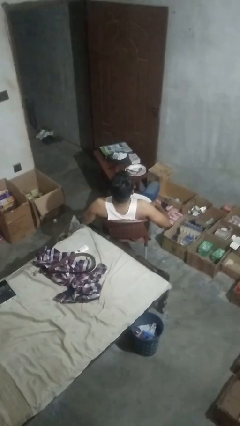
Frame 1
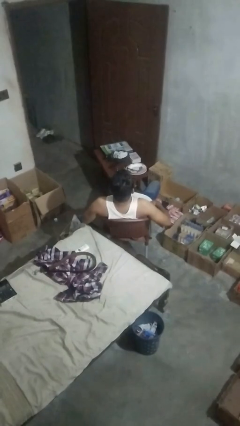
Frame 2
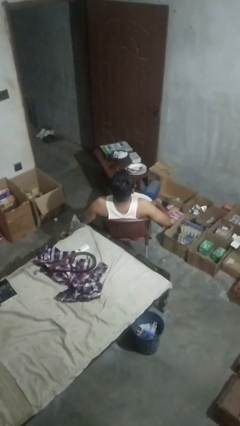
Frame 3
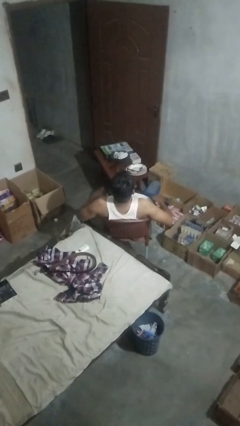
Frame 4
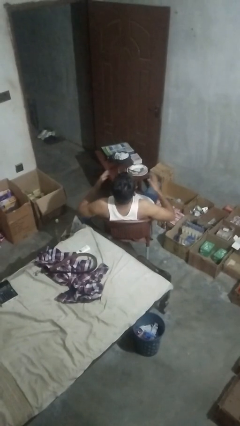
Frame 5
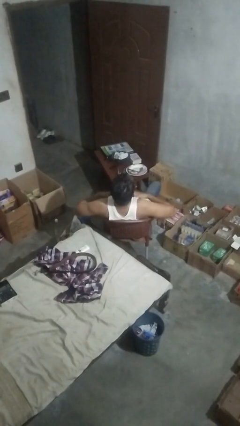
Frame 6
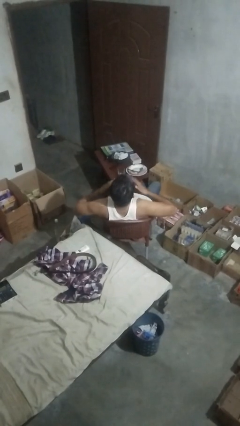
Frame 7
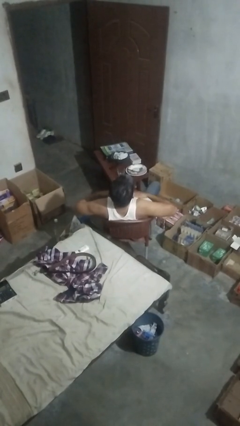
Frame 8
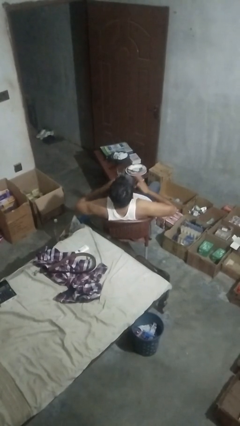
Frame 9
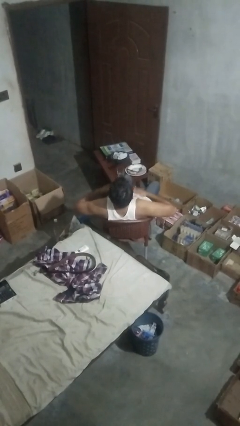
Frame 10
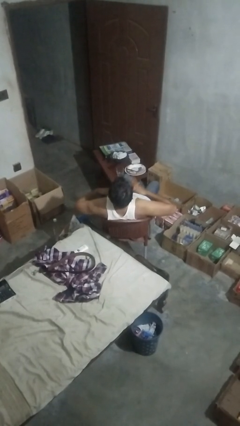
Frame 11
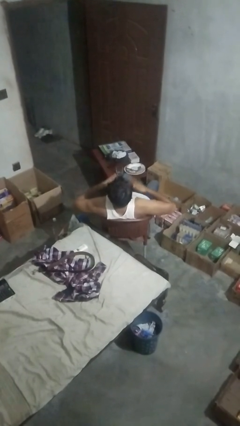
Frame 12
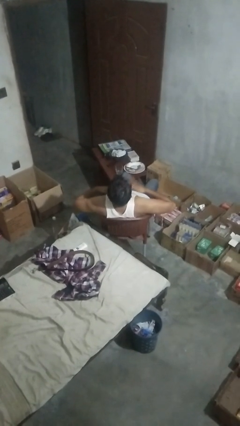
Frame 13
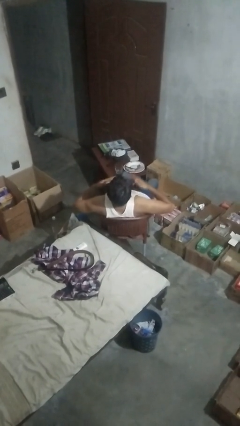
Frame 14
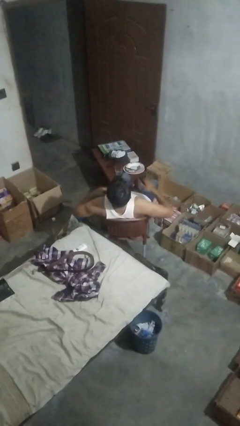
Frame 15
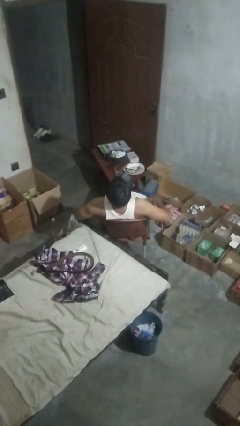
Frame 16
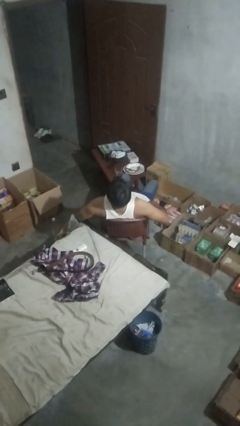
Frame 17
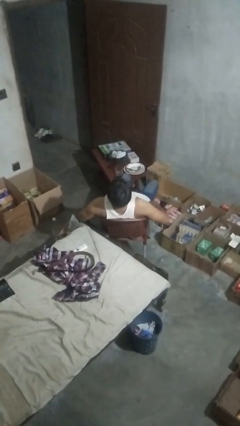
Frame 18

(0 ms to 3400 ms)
person drums on chest

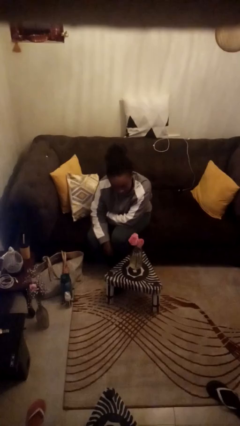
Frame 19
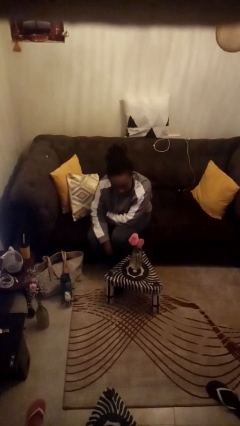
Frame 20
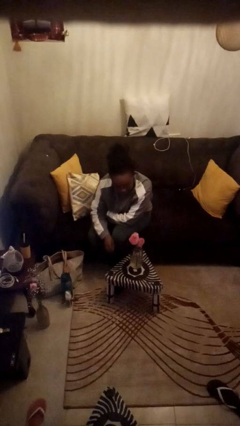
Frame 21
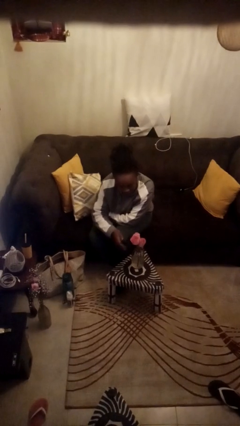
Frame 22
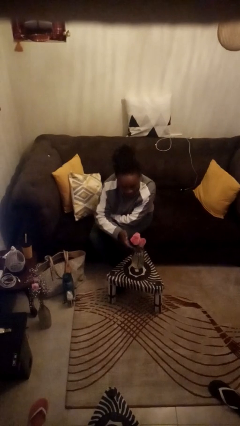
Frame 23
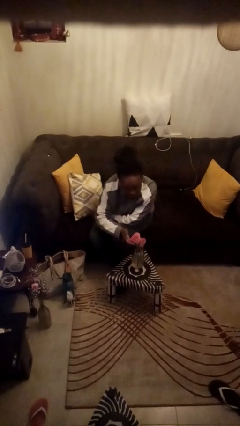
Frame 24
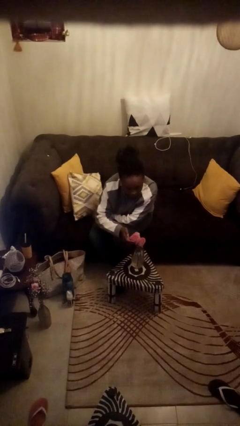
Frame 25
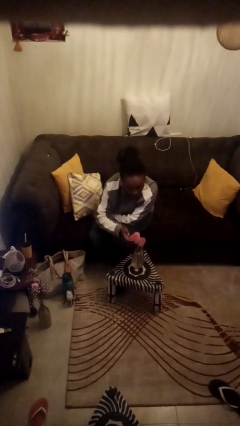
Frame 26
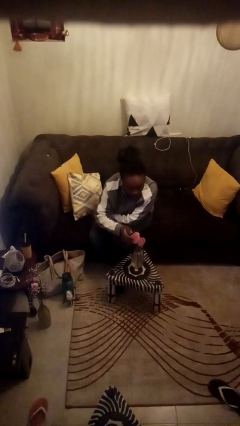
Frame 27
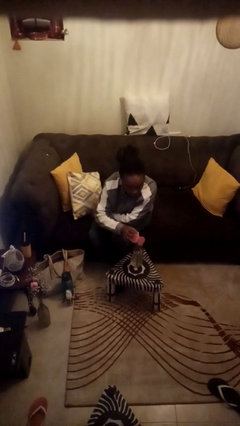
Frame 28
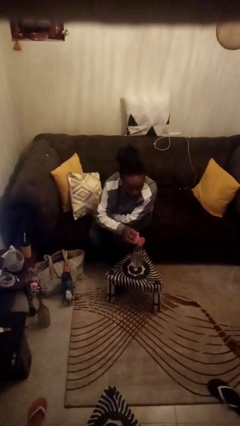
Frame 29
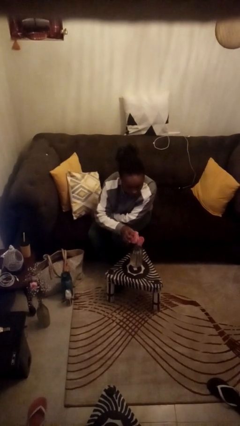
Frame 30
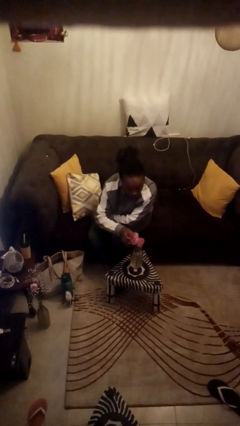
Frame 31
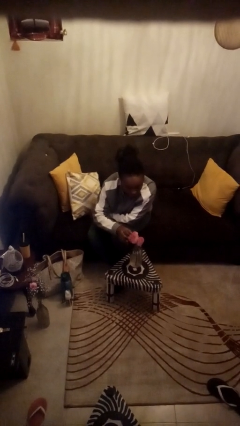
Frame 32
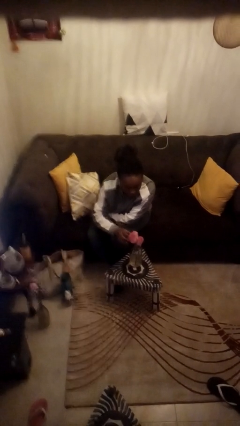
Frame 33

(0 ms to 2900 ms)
person arranges flowers in vase

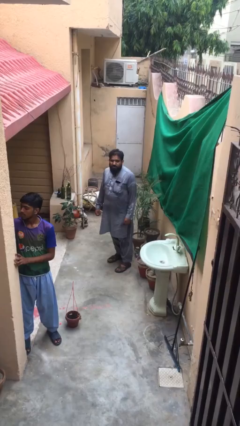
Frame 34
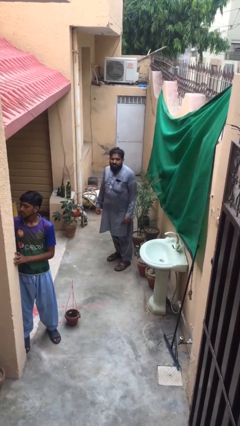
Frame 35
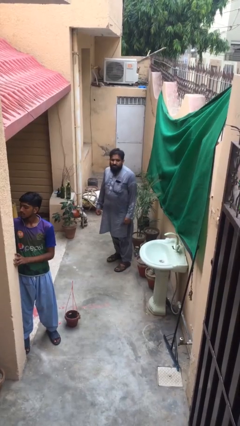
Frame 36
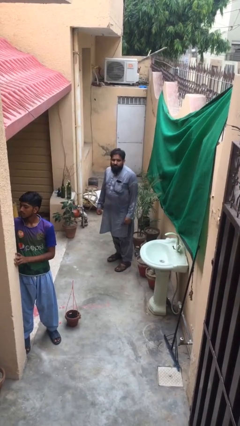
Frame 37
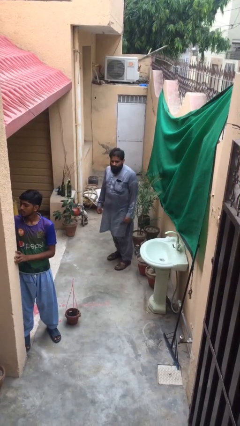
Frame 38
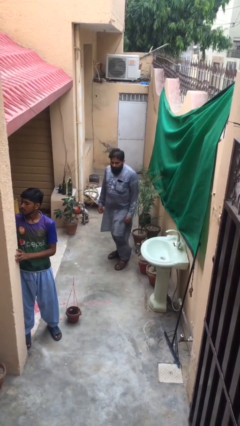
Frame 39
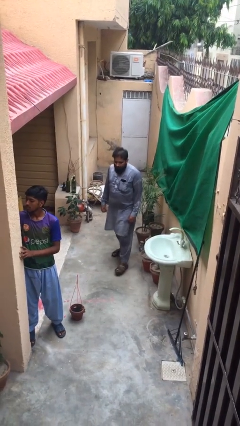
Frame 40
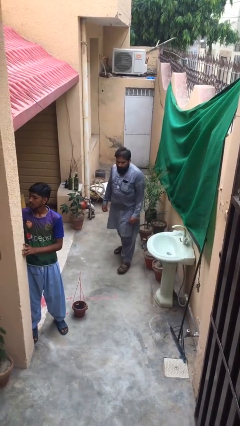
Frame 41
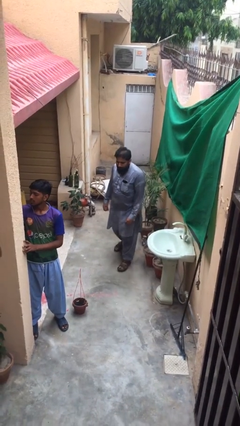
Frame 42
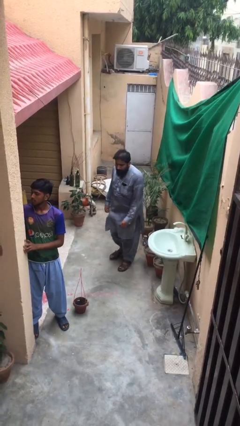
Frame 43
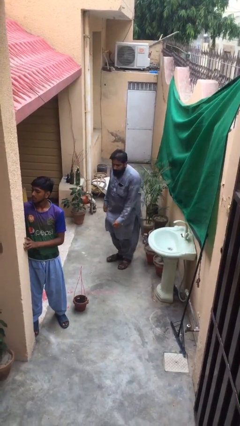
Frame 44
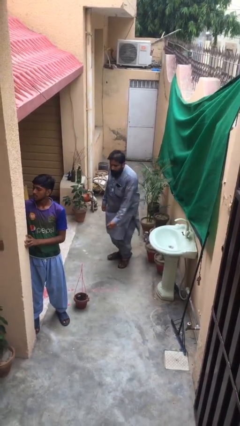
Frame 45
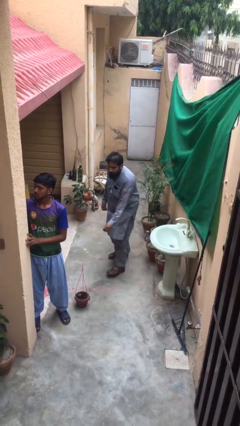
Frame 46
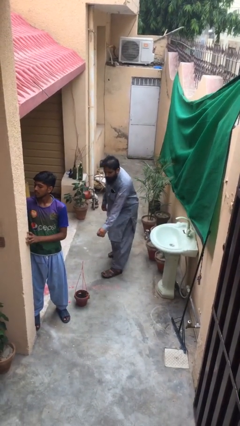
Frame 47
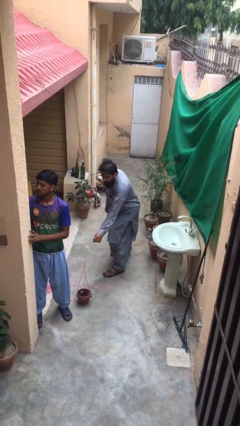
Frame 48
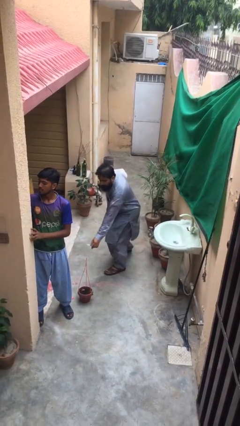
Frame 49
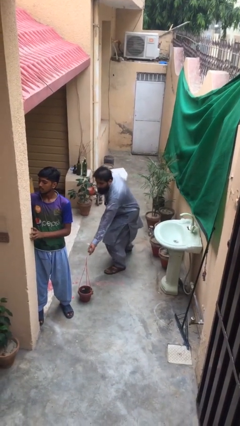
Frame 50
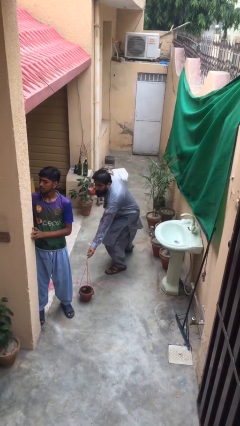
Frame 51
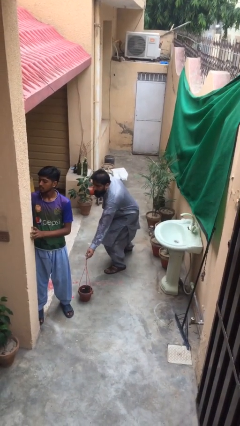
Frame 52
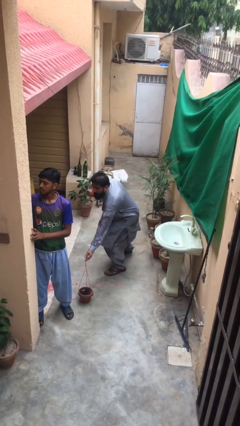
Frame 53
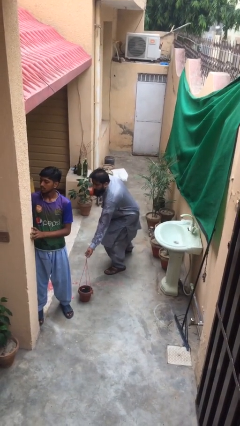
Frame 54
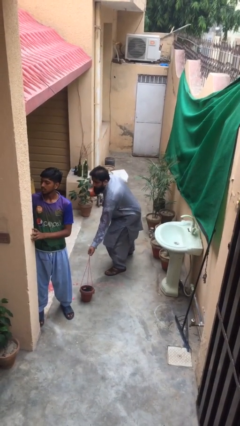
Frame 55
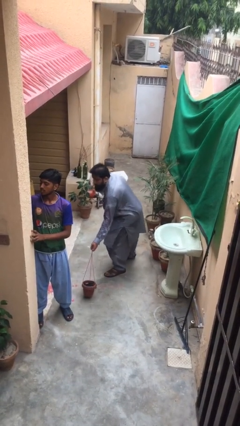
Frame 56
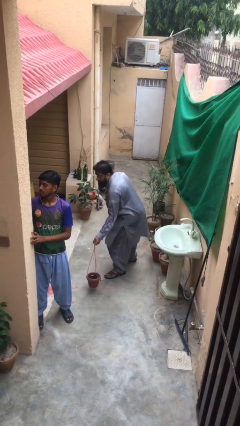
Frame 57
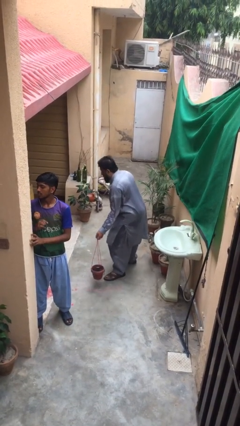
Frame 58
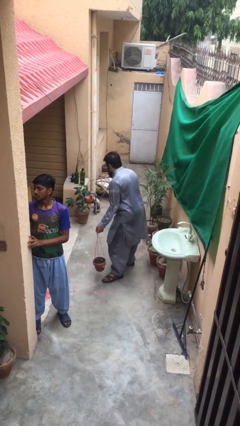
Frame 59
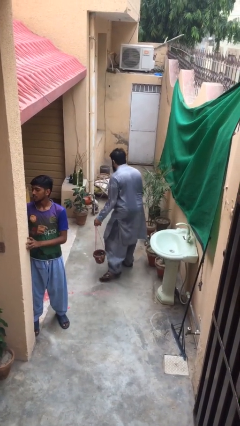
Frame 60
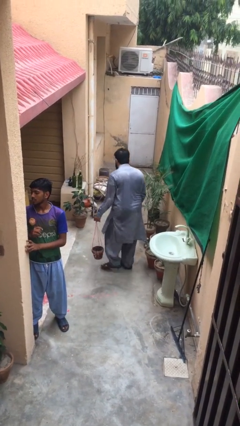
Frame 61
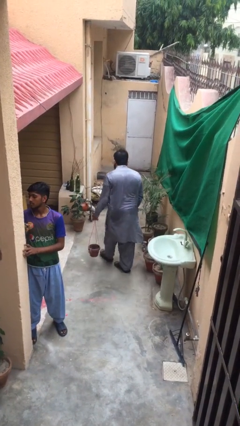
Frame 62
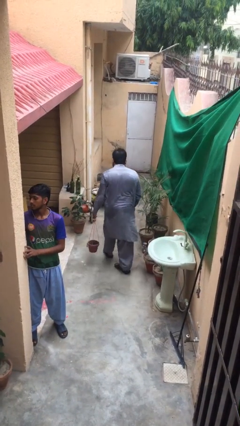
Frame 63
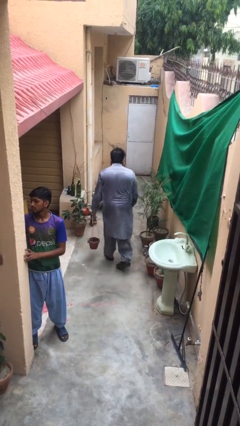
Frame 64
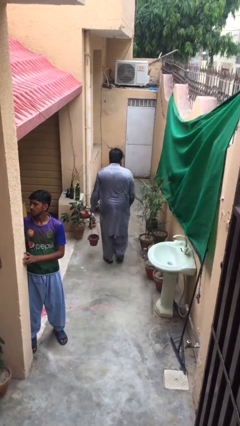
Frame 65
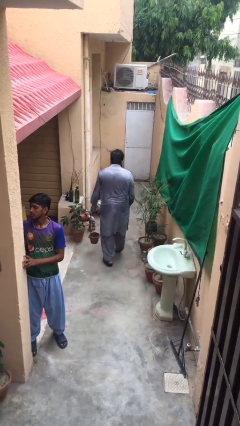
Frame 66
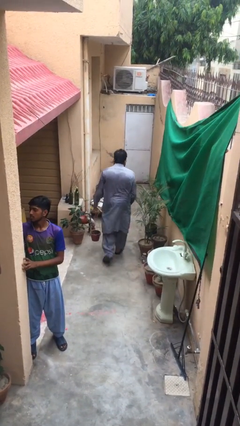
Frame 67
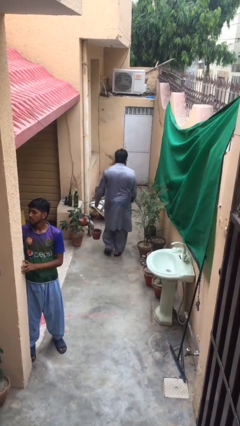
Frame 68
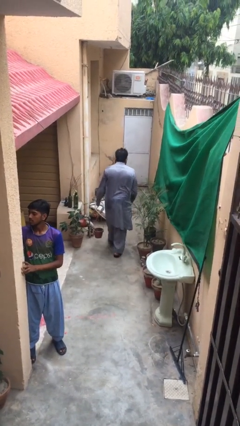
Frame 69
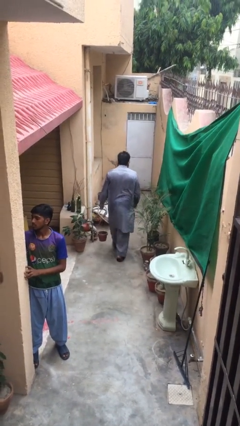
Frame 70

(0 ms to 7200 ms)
person steals object from person

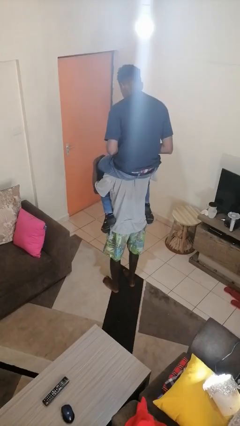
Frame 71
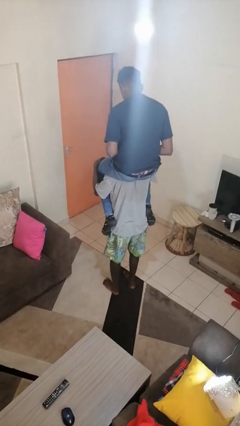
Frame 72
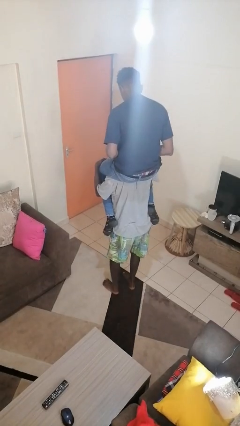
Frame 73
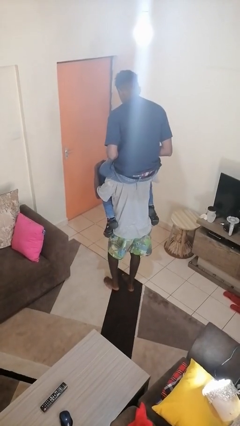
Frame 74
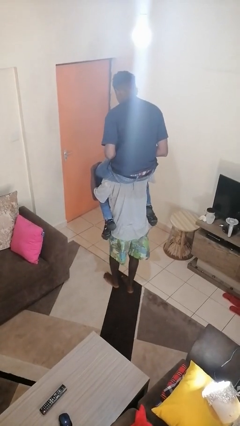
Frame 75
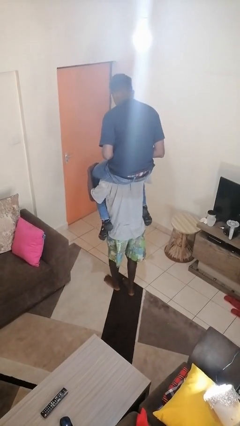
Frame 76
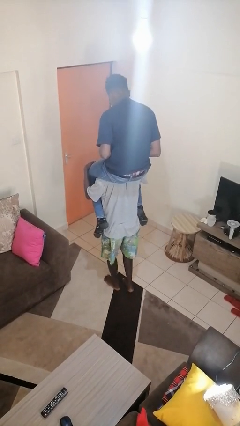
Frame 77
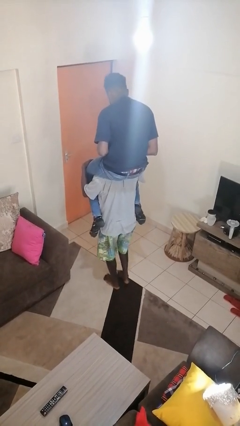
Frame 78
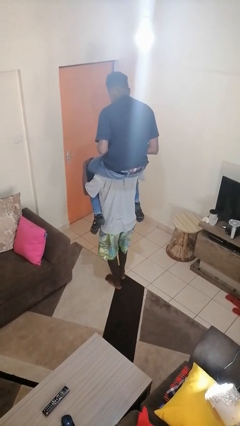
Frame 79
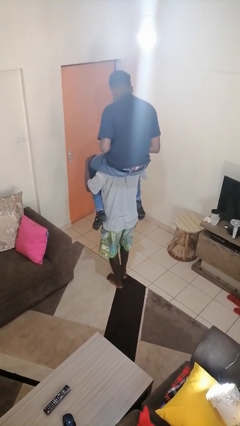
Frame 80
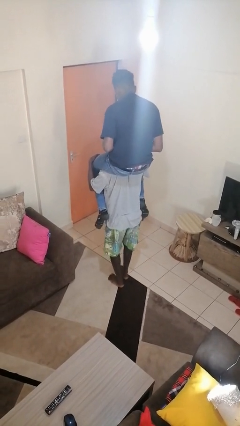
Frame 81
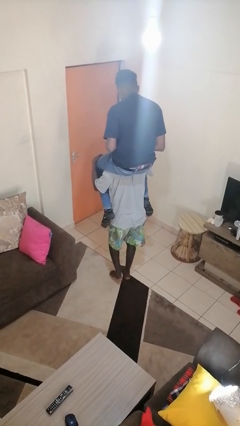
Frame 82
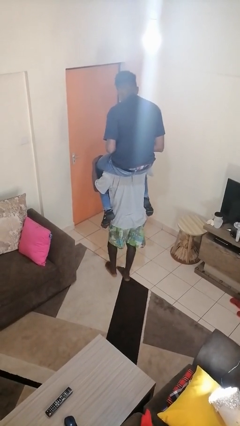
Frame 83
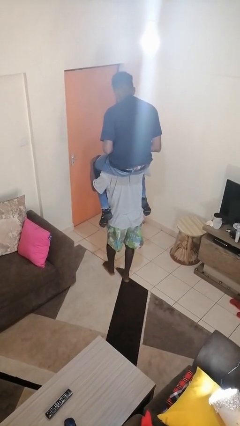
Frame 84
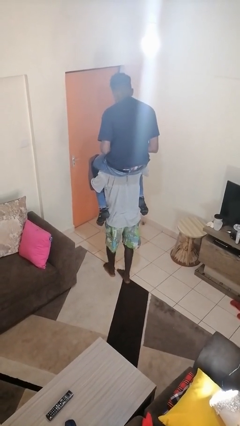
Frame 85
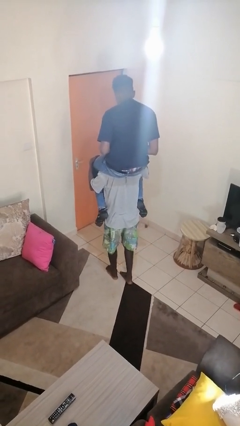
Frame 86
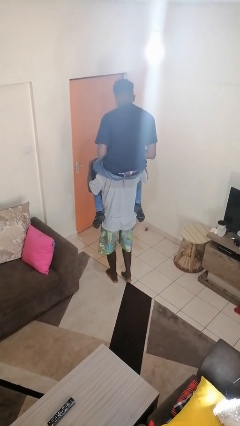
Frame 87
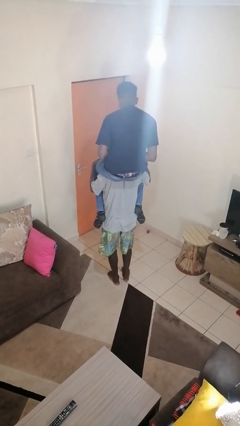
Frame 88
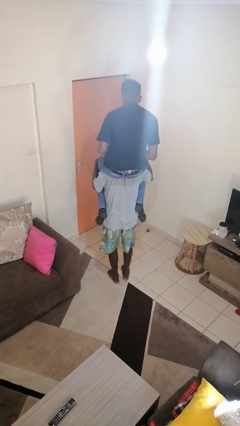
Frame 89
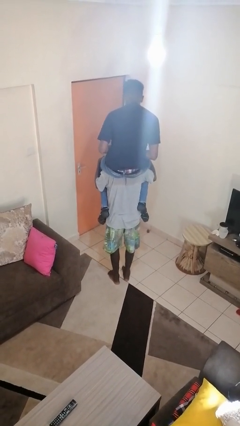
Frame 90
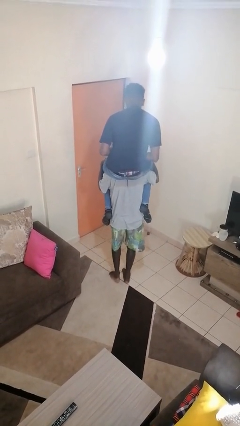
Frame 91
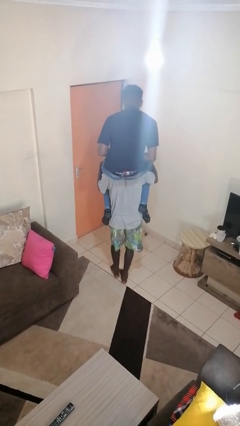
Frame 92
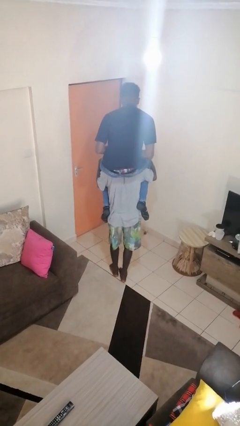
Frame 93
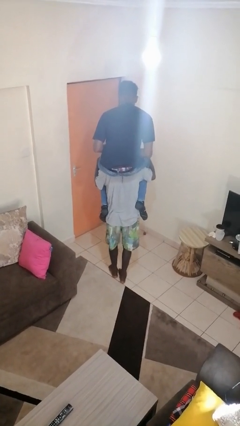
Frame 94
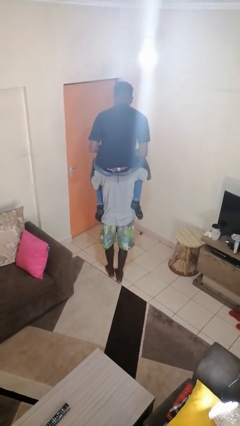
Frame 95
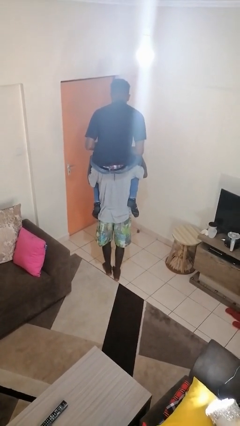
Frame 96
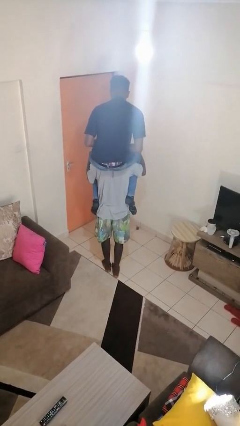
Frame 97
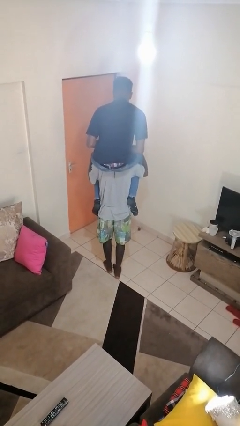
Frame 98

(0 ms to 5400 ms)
person carries person on shoulders
